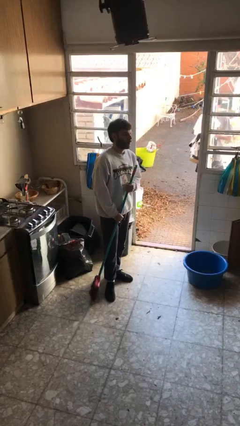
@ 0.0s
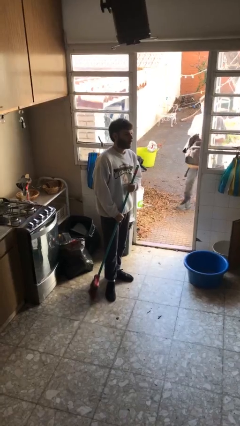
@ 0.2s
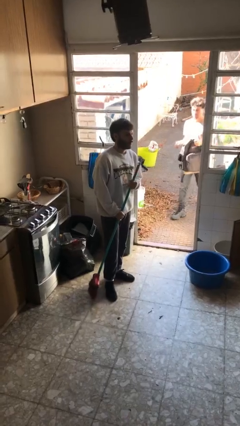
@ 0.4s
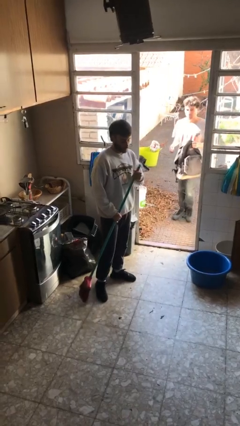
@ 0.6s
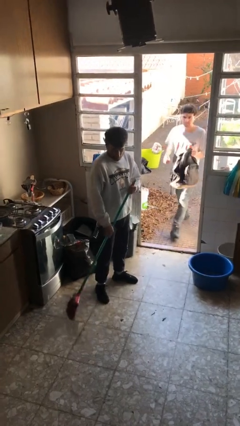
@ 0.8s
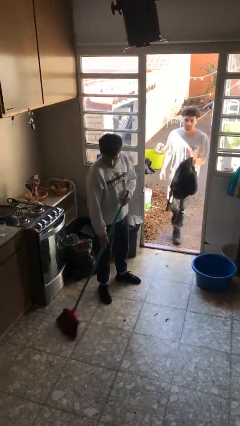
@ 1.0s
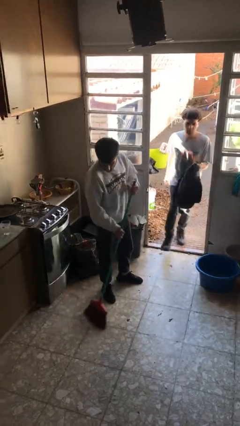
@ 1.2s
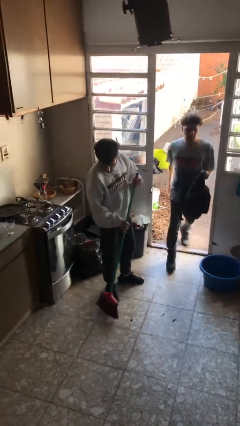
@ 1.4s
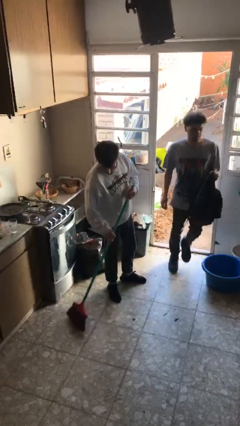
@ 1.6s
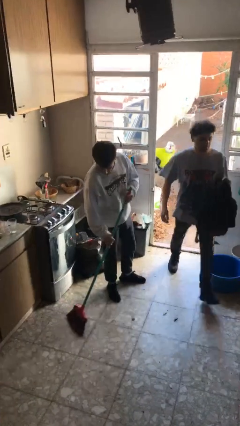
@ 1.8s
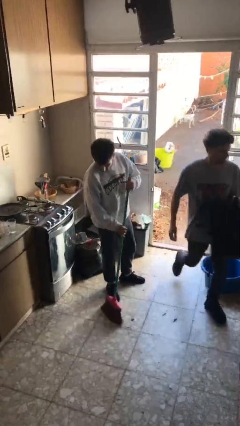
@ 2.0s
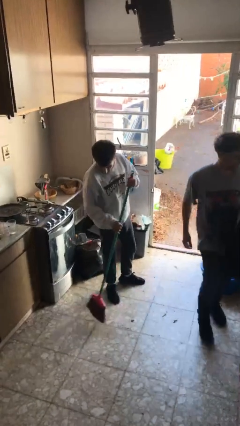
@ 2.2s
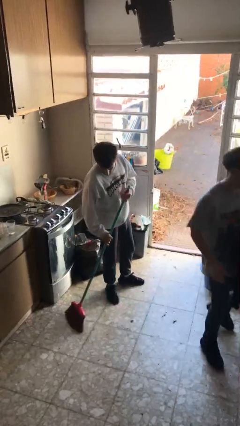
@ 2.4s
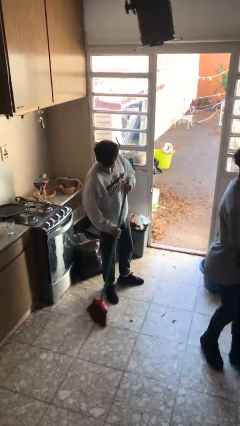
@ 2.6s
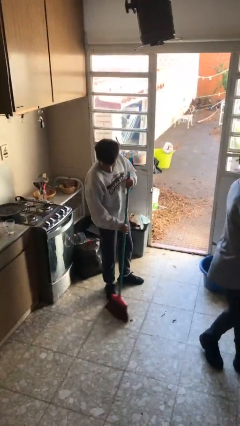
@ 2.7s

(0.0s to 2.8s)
person sweeps floor

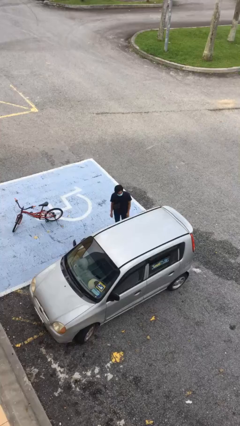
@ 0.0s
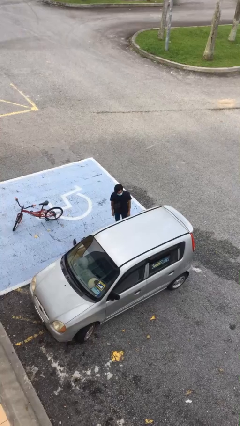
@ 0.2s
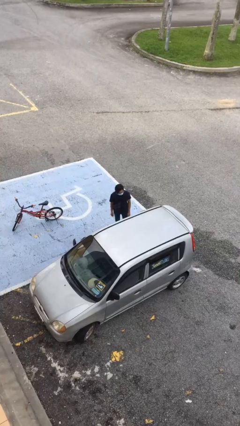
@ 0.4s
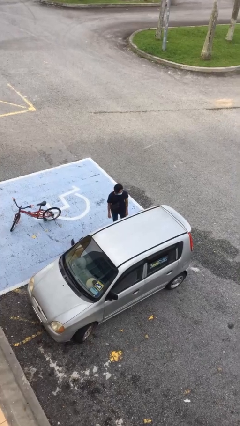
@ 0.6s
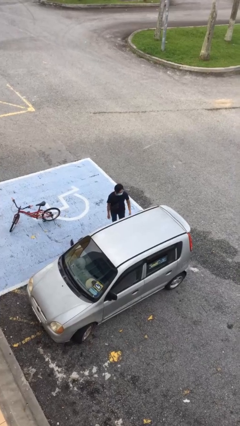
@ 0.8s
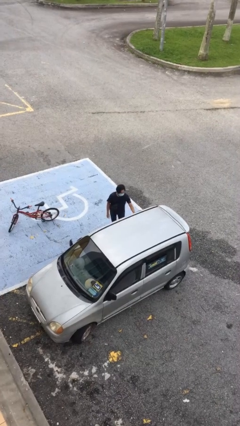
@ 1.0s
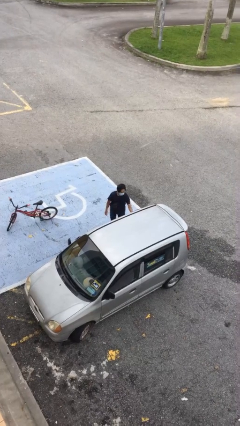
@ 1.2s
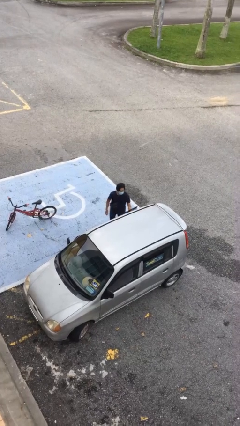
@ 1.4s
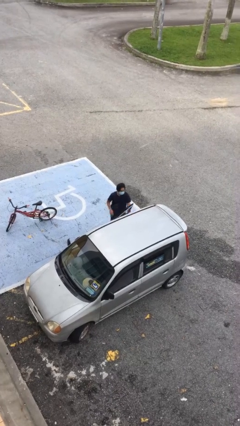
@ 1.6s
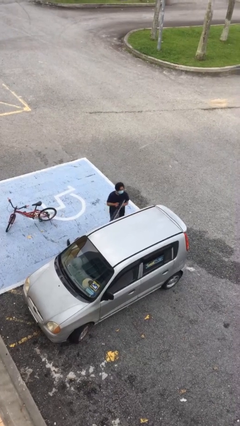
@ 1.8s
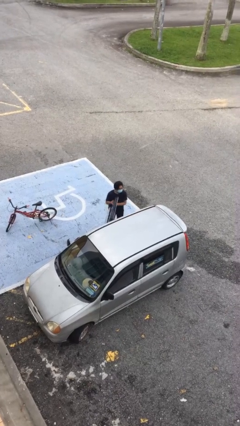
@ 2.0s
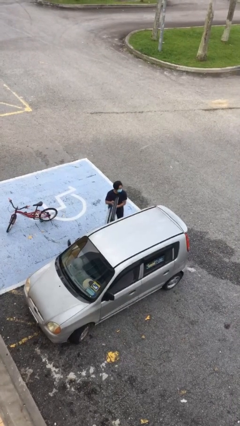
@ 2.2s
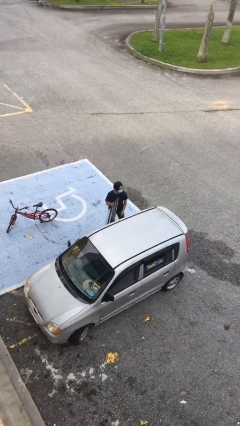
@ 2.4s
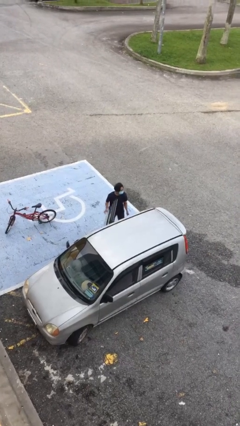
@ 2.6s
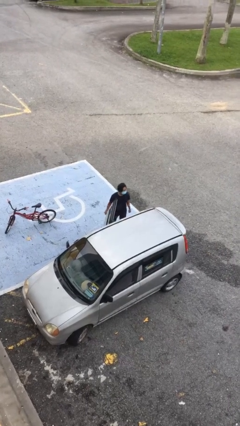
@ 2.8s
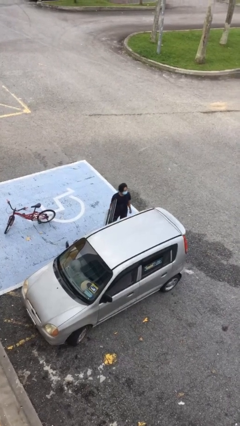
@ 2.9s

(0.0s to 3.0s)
person opens car door

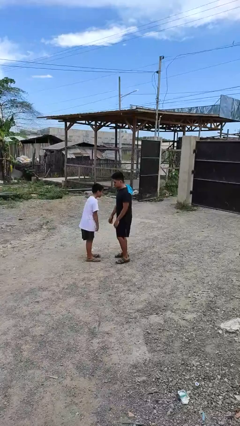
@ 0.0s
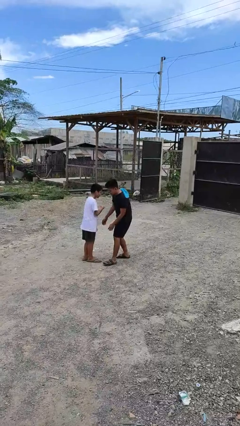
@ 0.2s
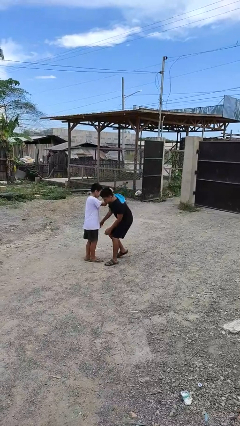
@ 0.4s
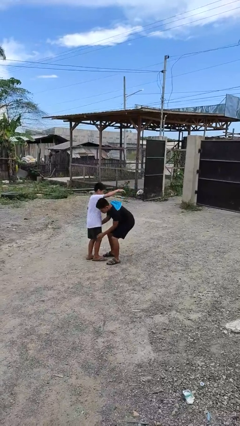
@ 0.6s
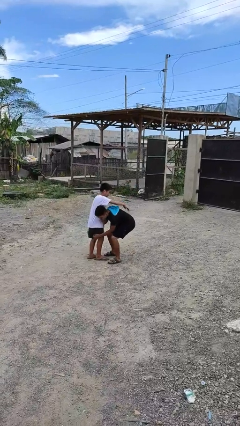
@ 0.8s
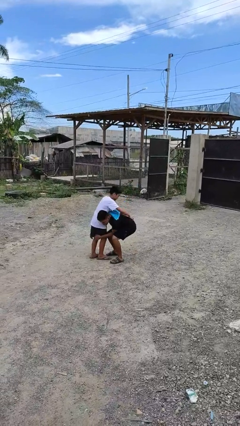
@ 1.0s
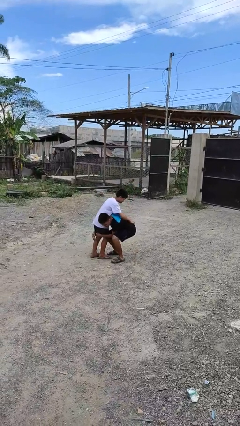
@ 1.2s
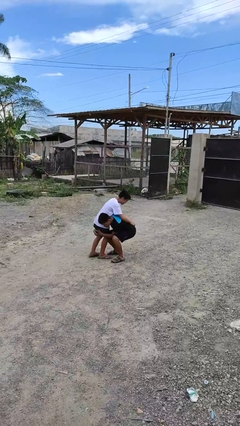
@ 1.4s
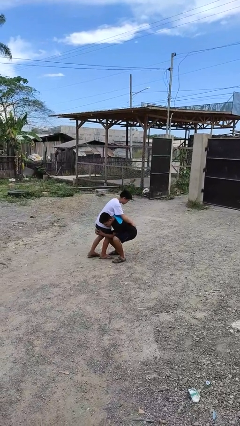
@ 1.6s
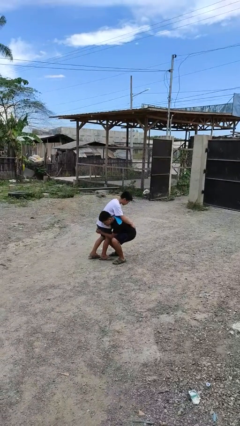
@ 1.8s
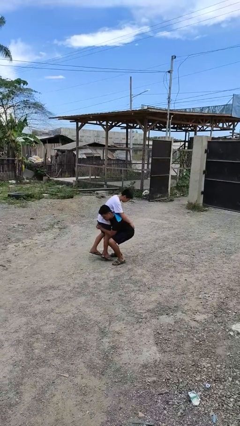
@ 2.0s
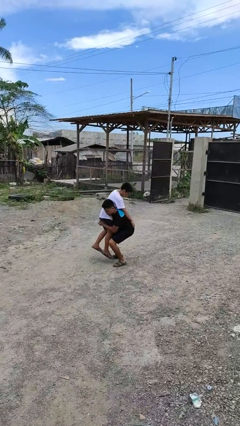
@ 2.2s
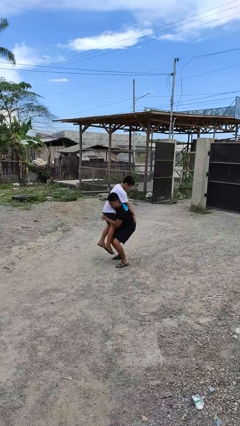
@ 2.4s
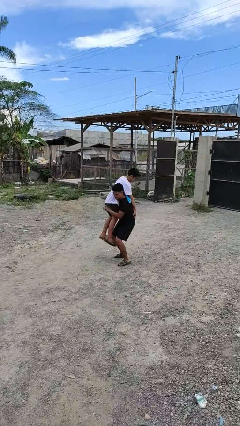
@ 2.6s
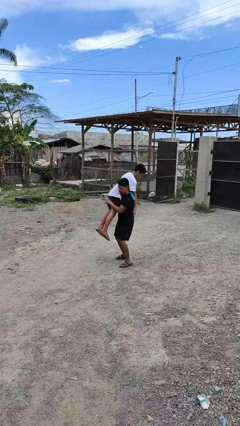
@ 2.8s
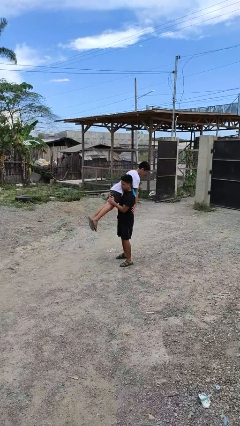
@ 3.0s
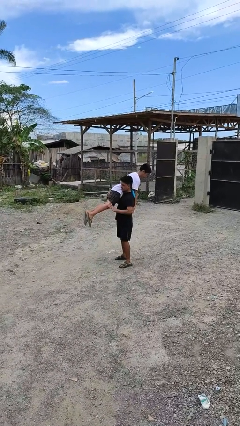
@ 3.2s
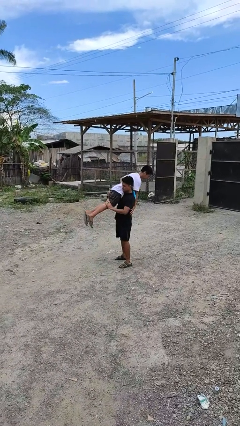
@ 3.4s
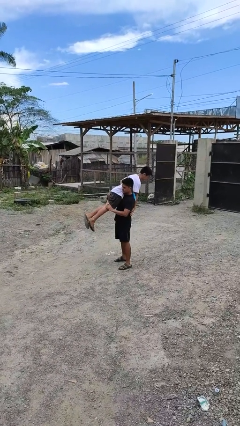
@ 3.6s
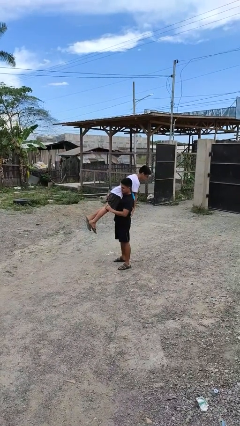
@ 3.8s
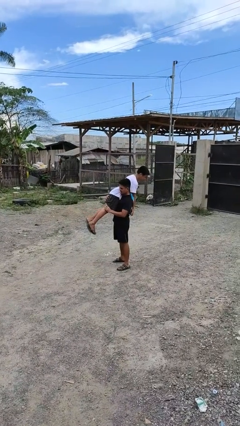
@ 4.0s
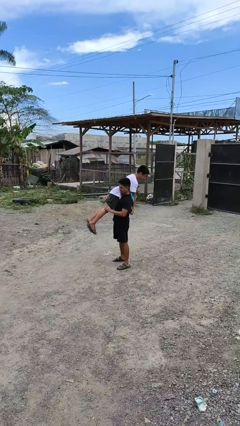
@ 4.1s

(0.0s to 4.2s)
person carries person over shoulder

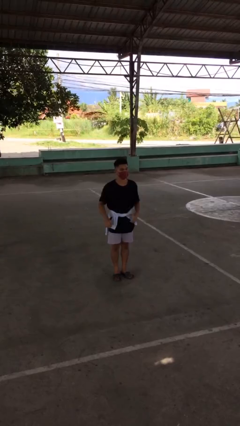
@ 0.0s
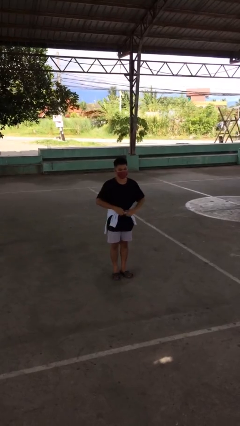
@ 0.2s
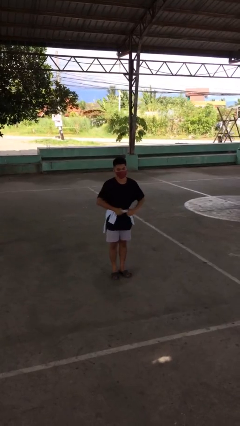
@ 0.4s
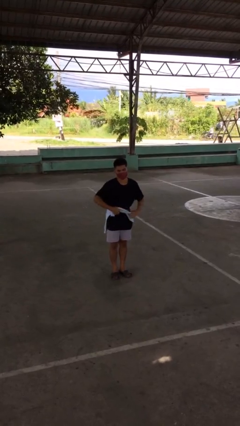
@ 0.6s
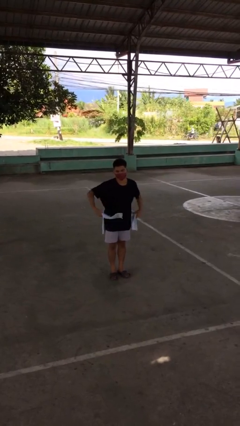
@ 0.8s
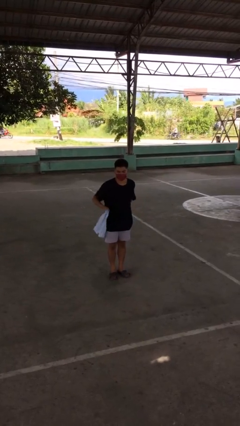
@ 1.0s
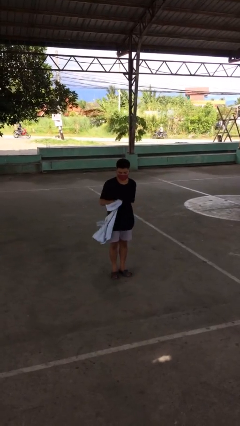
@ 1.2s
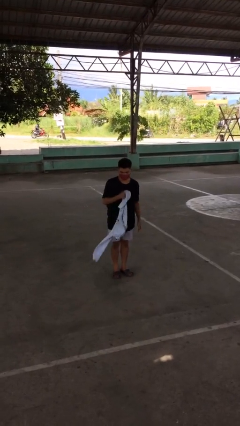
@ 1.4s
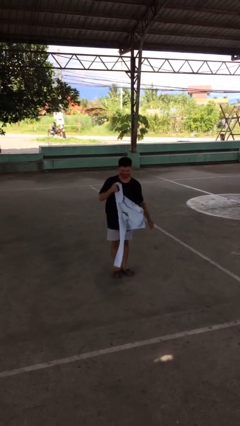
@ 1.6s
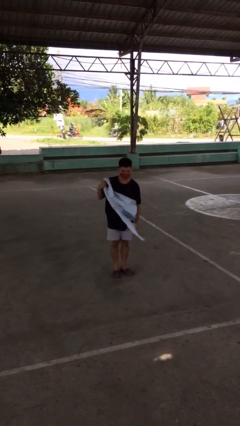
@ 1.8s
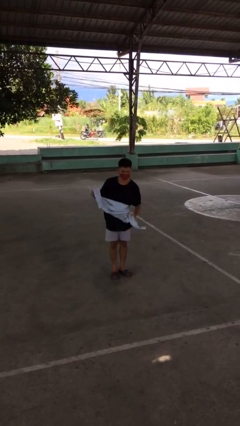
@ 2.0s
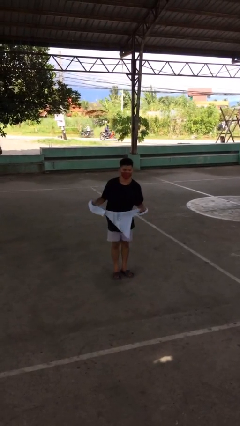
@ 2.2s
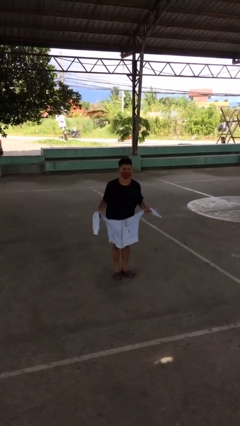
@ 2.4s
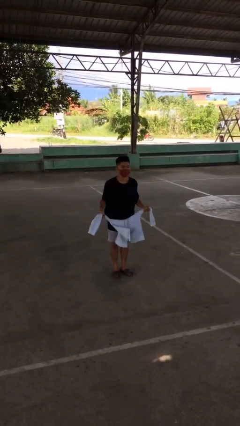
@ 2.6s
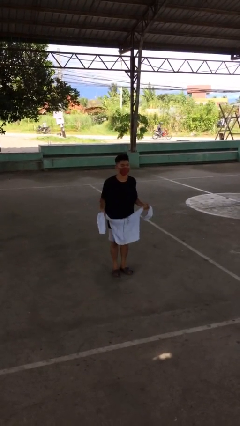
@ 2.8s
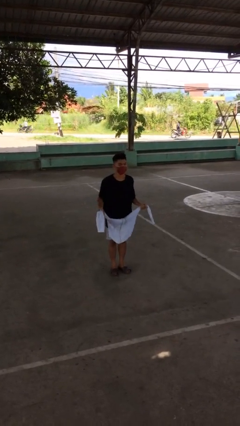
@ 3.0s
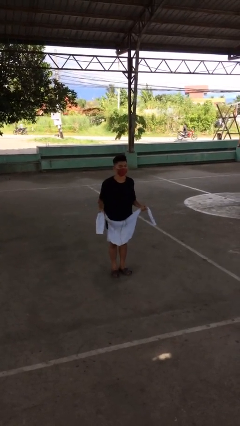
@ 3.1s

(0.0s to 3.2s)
person unties jacket around waist

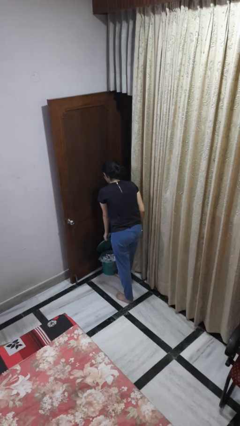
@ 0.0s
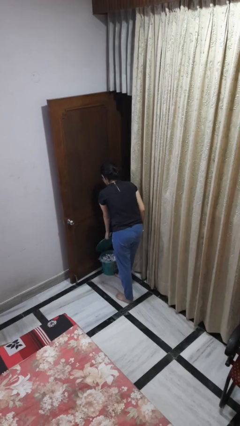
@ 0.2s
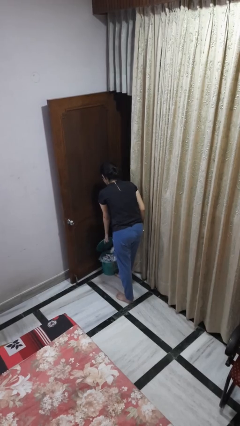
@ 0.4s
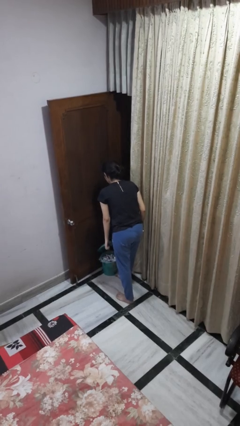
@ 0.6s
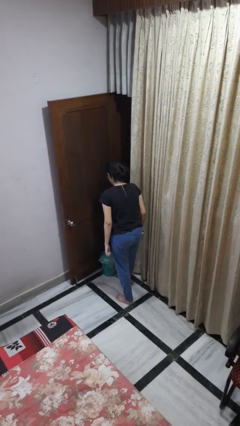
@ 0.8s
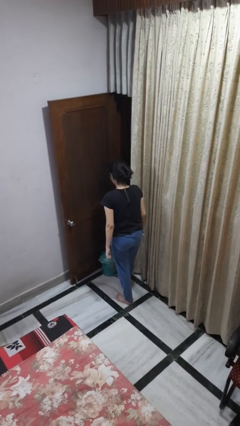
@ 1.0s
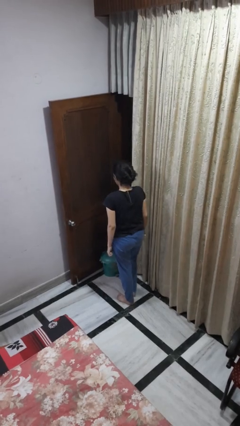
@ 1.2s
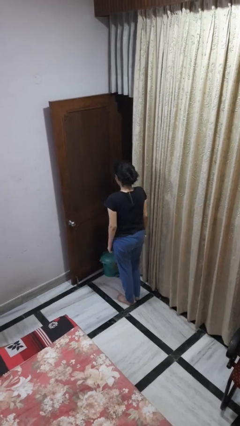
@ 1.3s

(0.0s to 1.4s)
person discards trash

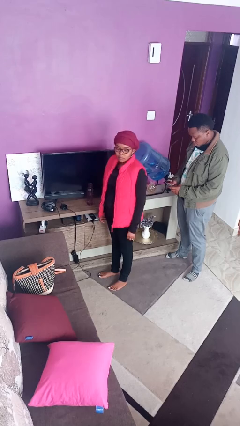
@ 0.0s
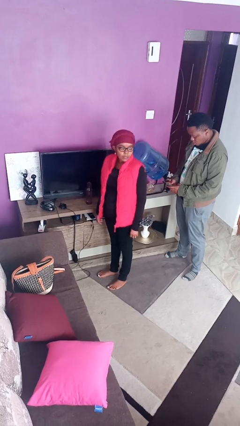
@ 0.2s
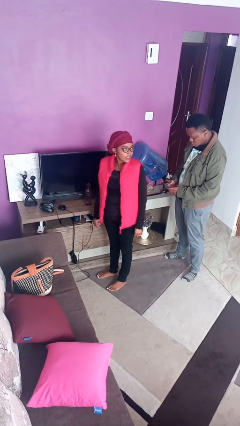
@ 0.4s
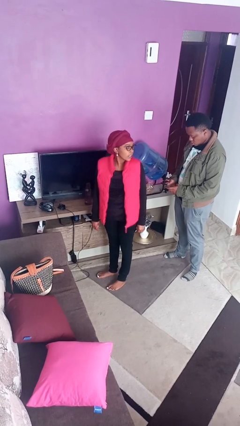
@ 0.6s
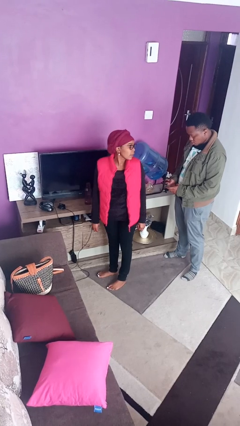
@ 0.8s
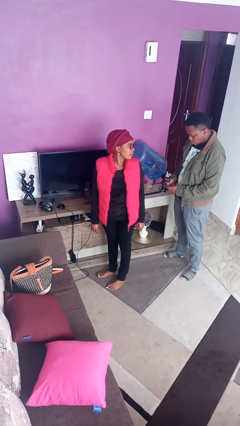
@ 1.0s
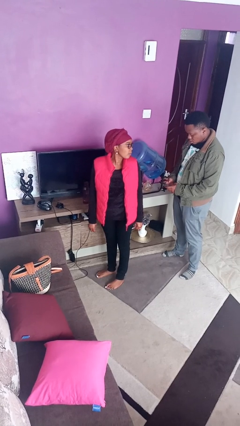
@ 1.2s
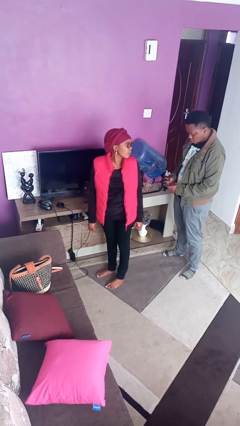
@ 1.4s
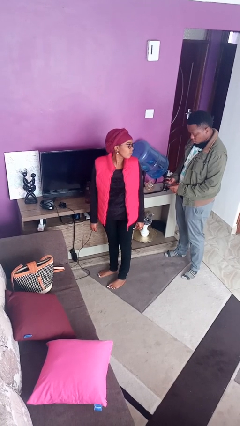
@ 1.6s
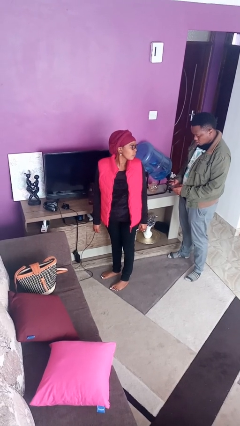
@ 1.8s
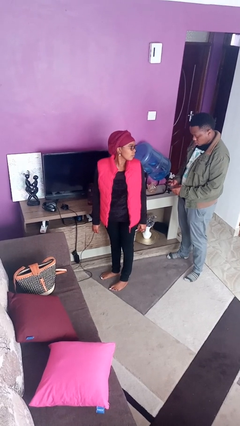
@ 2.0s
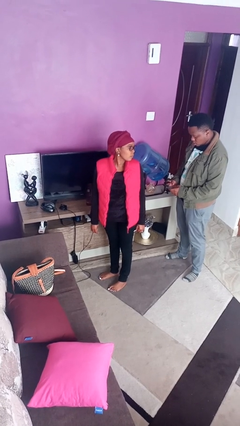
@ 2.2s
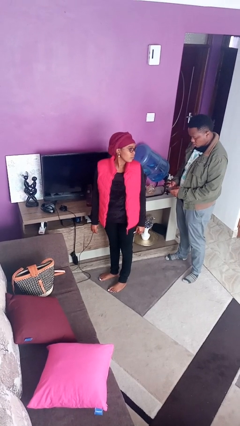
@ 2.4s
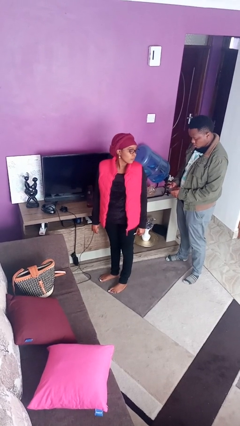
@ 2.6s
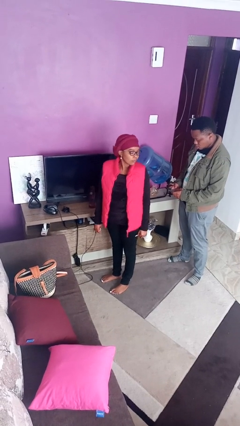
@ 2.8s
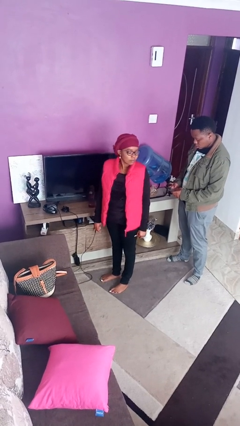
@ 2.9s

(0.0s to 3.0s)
person looks over shoulder
